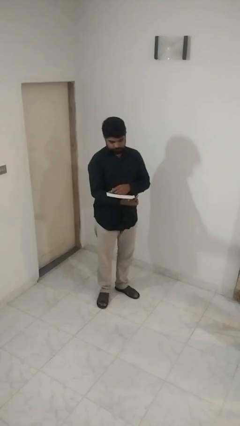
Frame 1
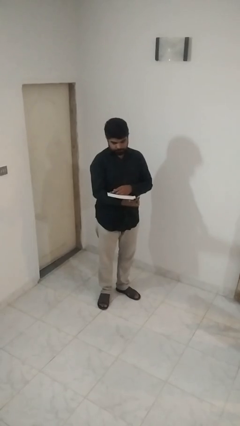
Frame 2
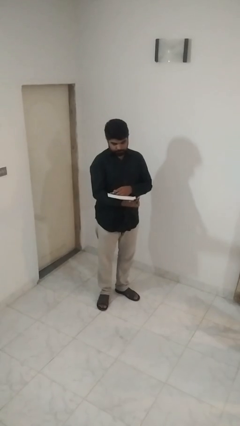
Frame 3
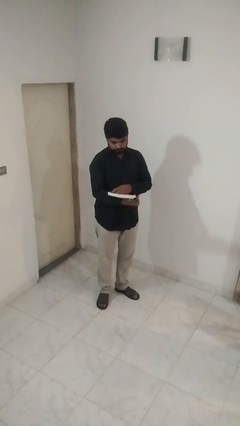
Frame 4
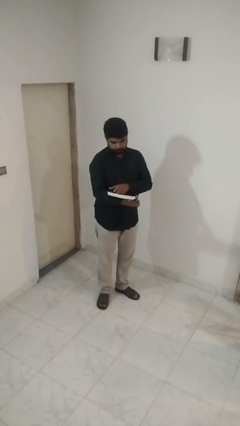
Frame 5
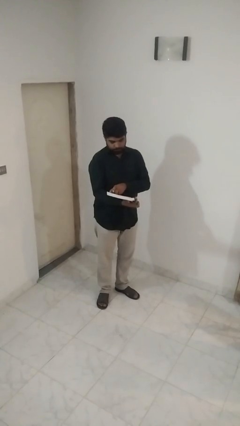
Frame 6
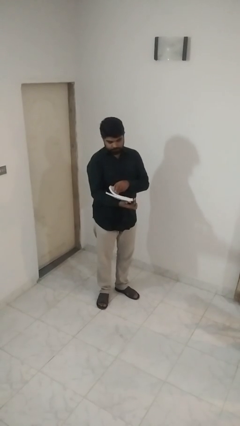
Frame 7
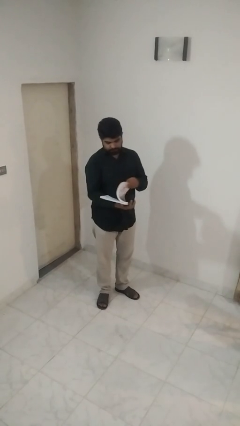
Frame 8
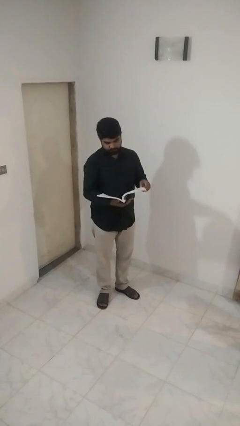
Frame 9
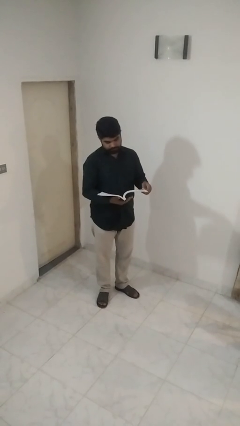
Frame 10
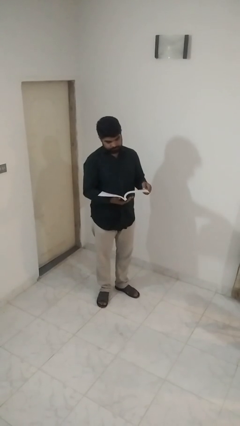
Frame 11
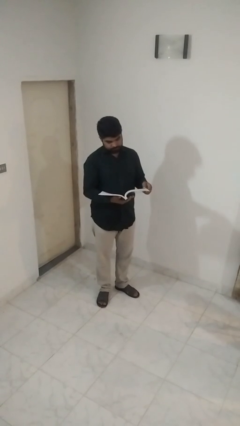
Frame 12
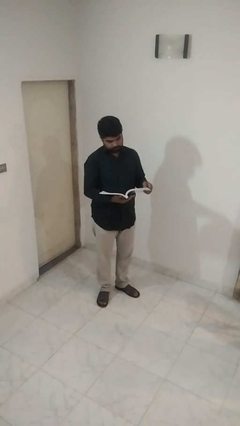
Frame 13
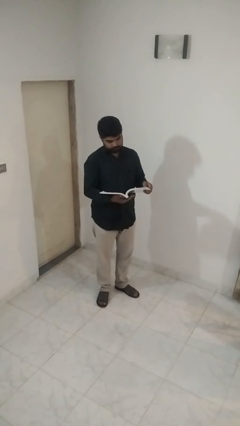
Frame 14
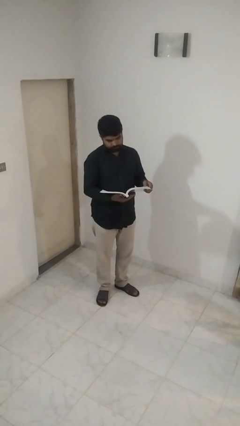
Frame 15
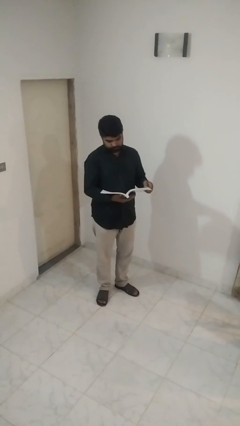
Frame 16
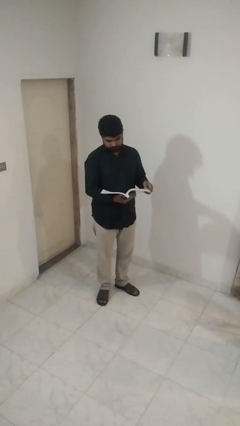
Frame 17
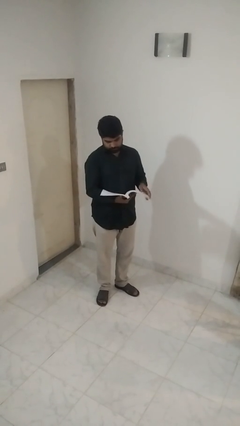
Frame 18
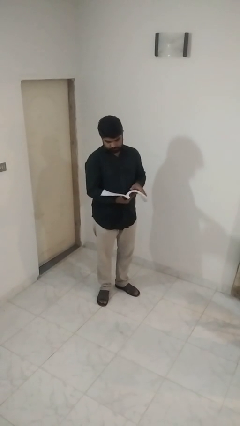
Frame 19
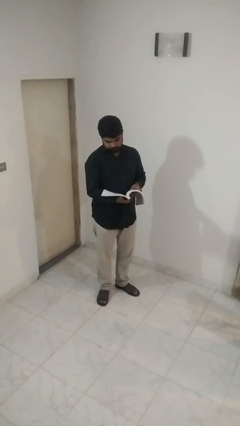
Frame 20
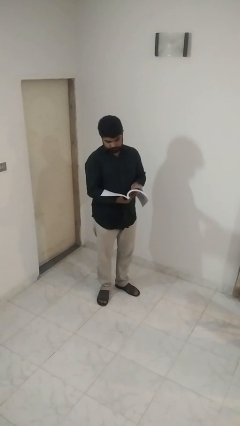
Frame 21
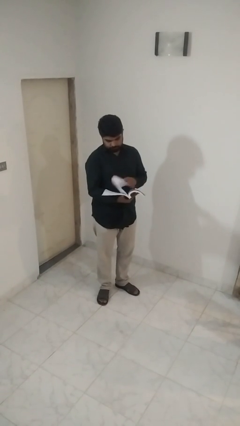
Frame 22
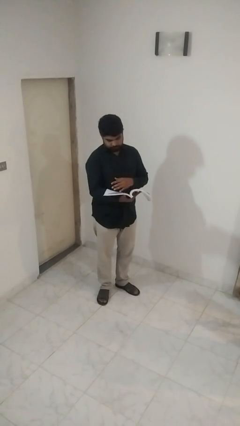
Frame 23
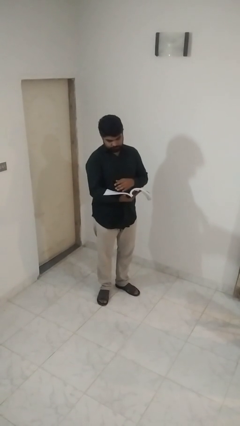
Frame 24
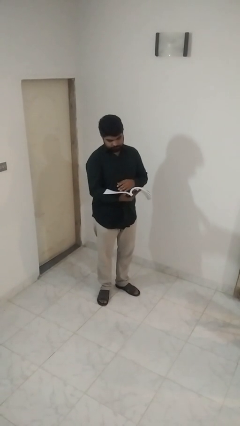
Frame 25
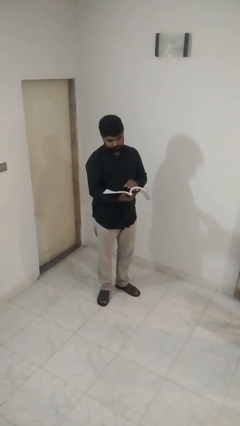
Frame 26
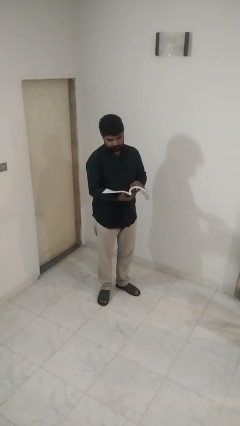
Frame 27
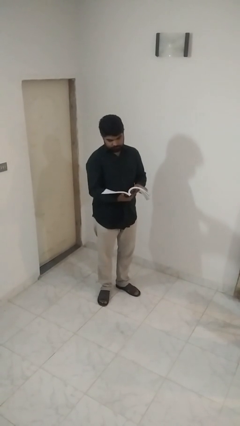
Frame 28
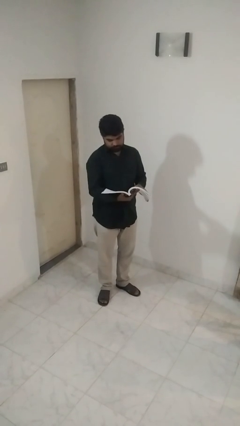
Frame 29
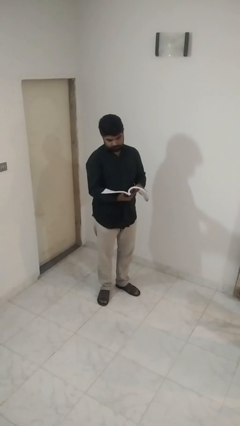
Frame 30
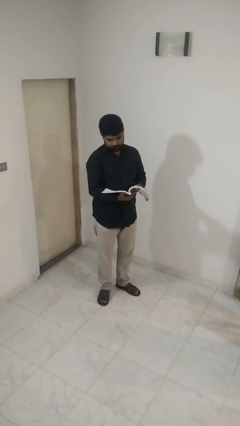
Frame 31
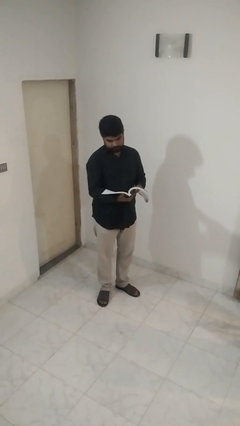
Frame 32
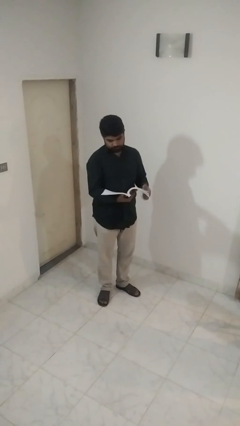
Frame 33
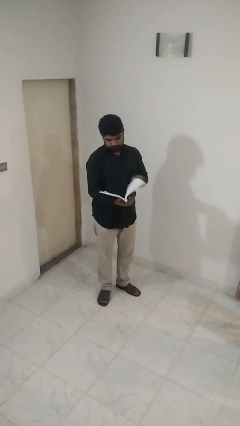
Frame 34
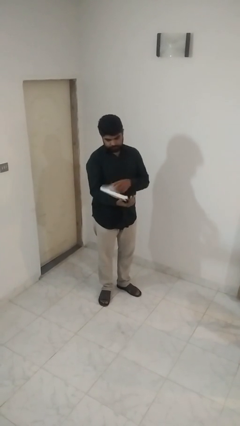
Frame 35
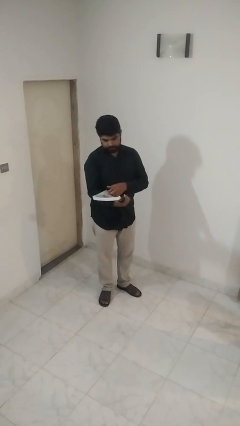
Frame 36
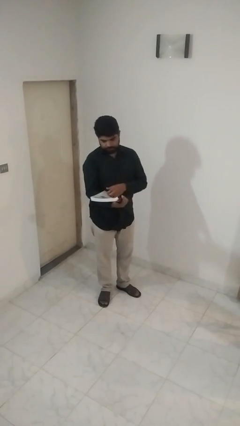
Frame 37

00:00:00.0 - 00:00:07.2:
person reads book

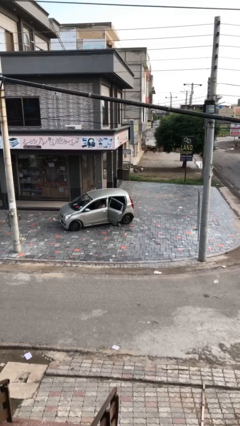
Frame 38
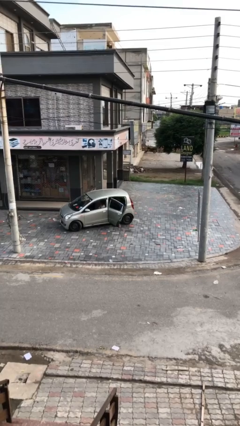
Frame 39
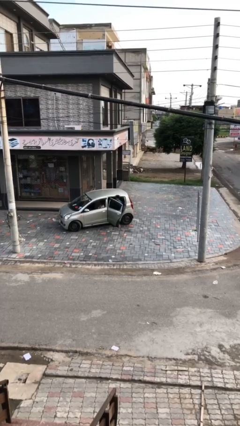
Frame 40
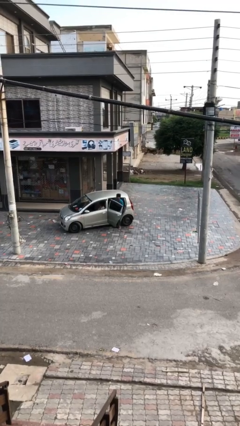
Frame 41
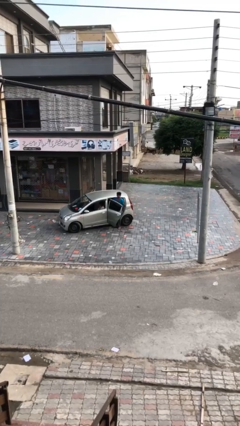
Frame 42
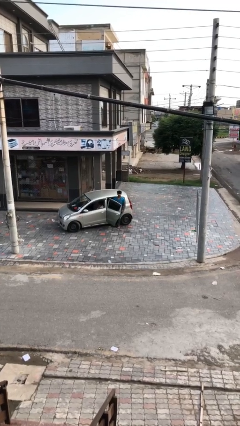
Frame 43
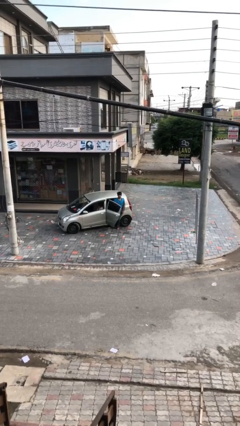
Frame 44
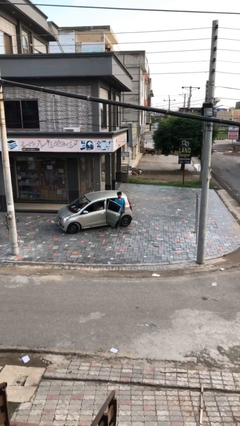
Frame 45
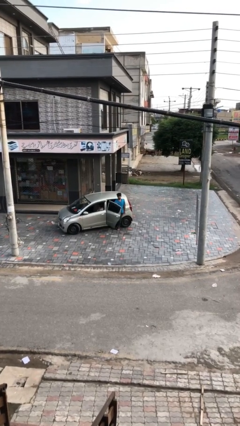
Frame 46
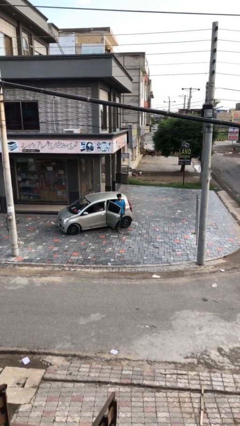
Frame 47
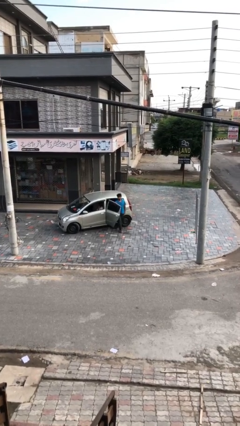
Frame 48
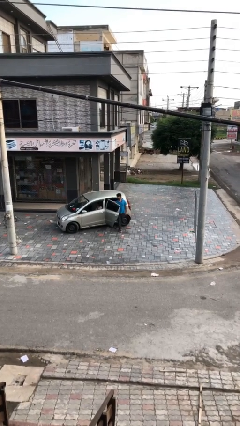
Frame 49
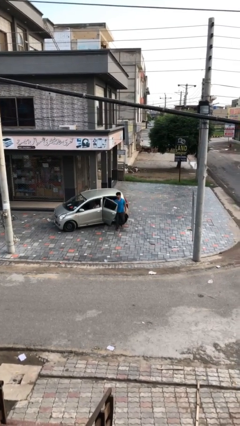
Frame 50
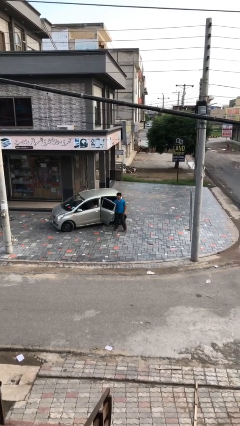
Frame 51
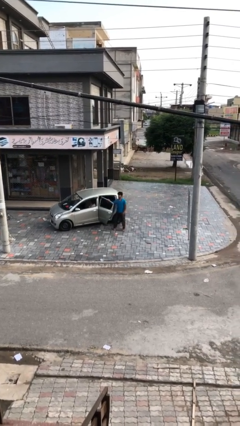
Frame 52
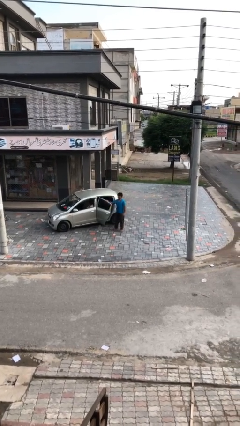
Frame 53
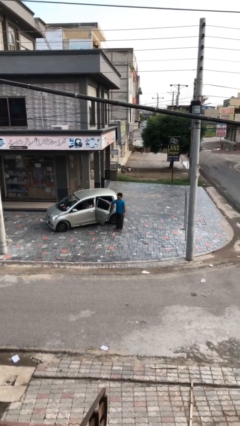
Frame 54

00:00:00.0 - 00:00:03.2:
person exits car

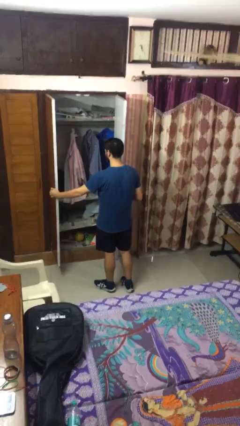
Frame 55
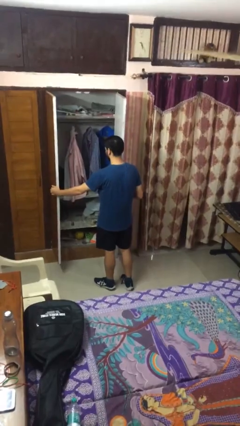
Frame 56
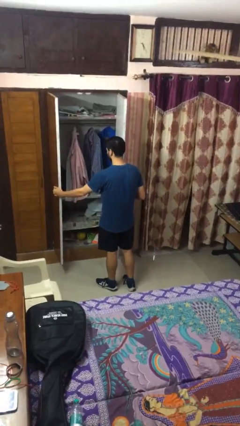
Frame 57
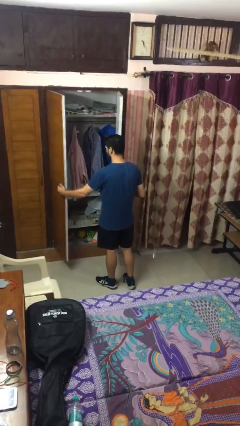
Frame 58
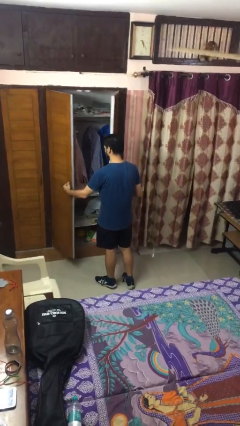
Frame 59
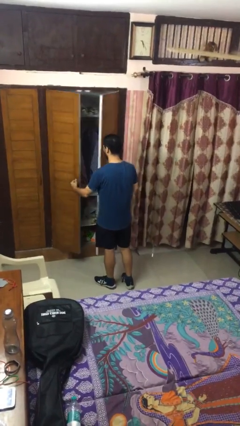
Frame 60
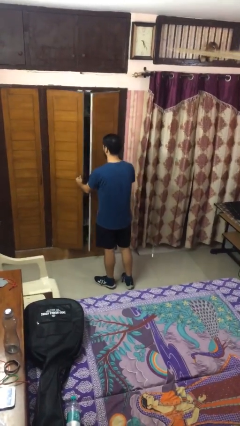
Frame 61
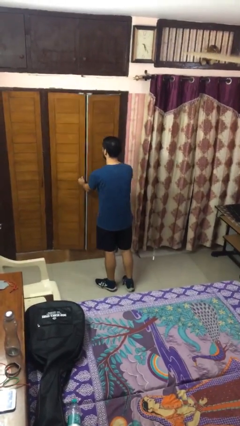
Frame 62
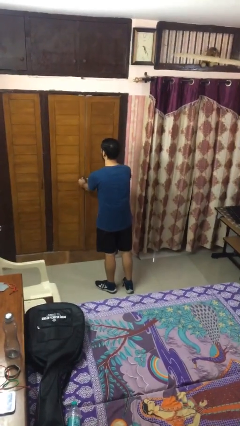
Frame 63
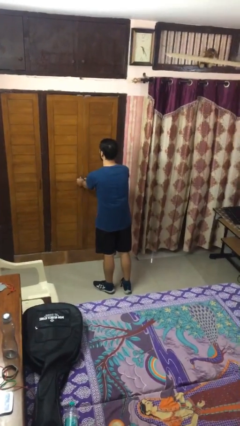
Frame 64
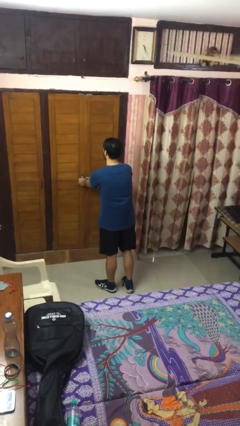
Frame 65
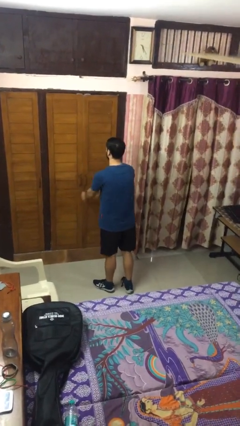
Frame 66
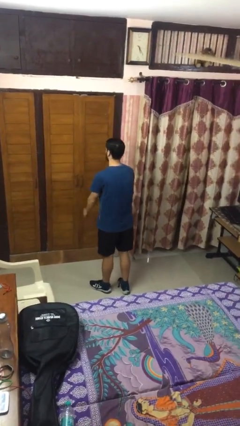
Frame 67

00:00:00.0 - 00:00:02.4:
person closes closet door

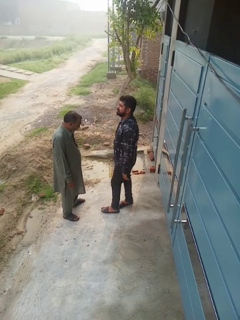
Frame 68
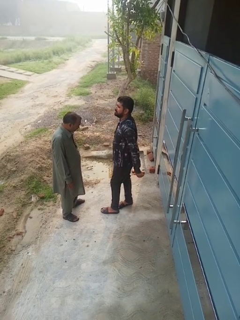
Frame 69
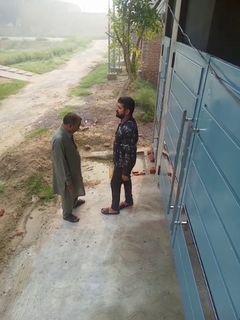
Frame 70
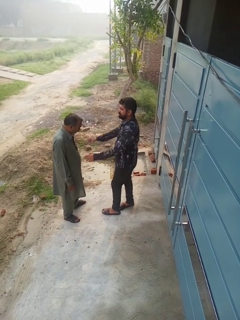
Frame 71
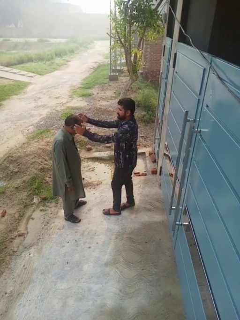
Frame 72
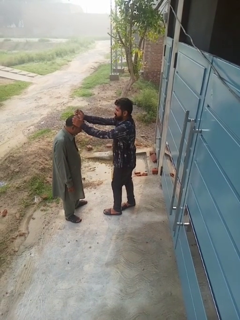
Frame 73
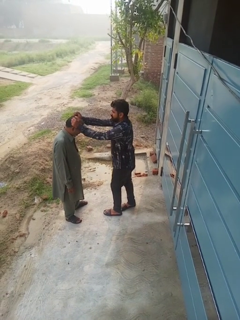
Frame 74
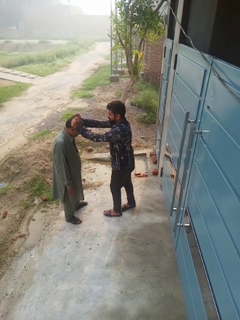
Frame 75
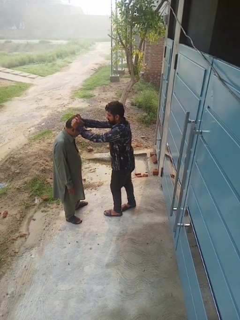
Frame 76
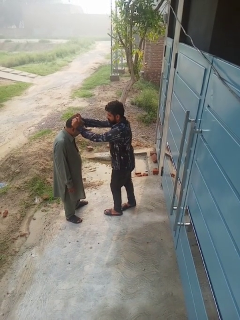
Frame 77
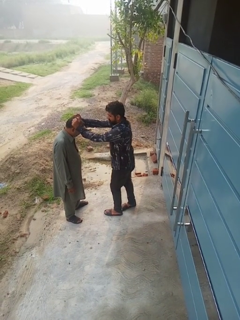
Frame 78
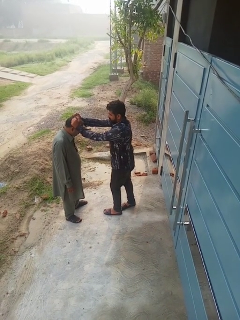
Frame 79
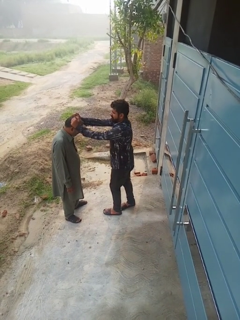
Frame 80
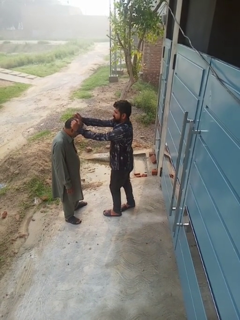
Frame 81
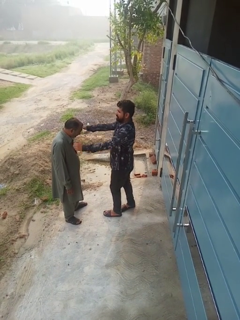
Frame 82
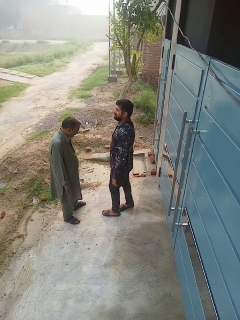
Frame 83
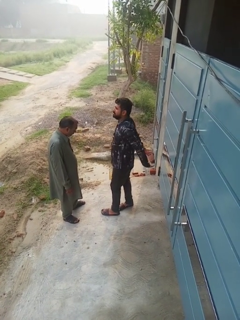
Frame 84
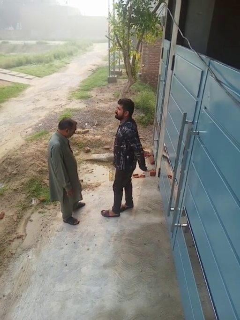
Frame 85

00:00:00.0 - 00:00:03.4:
person grabs person by hair

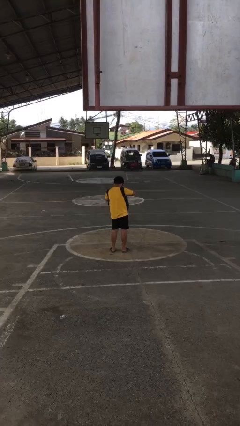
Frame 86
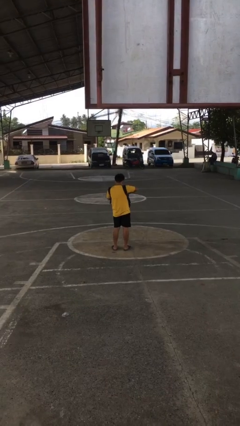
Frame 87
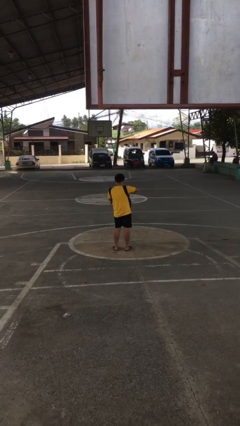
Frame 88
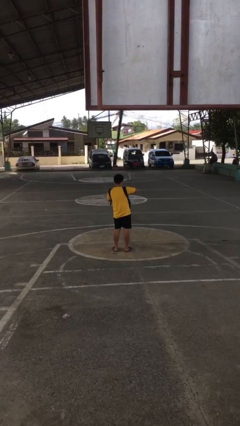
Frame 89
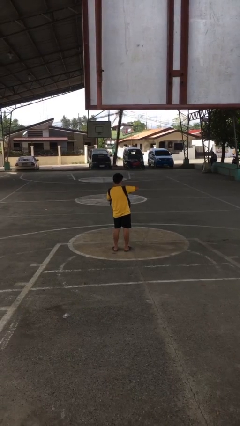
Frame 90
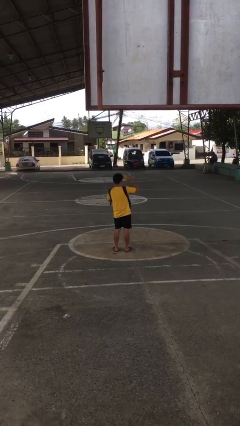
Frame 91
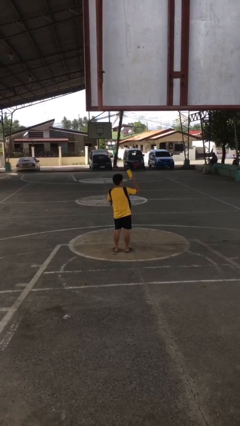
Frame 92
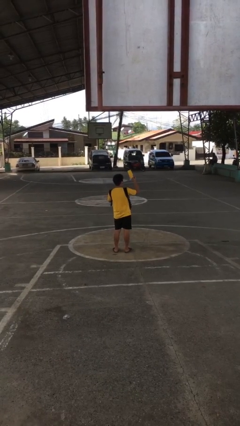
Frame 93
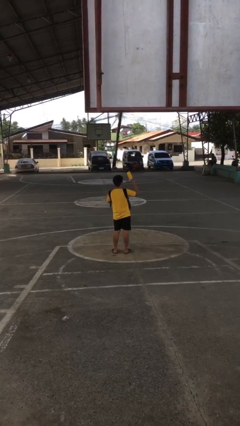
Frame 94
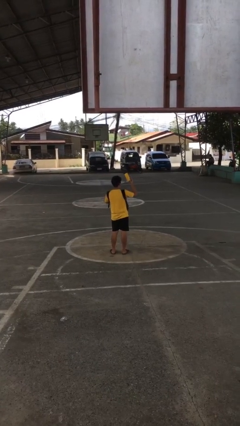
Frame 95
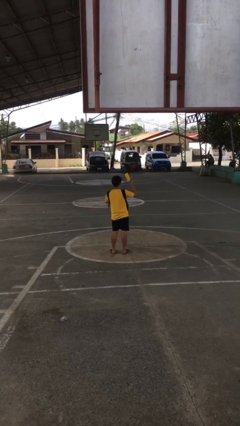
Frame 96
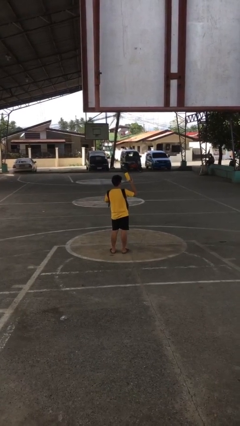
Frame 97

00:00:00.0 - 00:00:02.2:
person takes object from backpack
